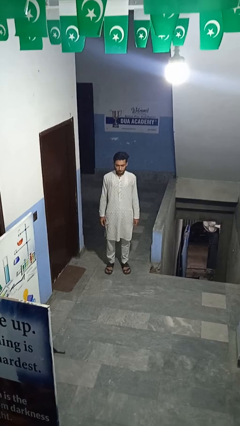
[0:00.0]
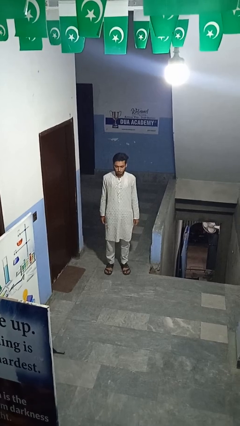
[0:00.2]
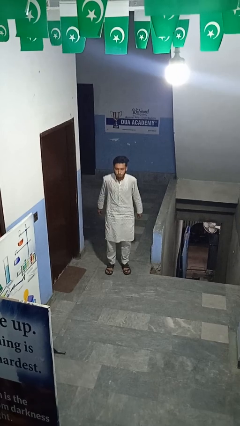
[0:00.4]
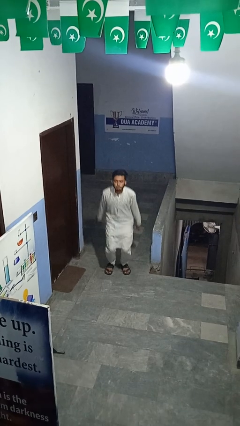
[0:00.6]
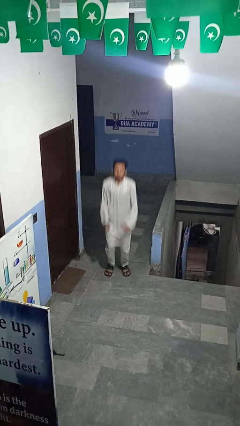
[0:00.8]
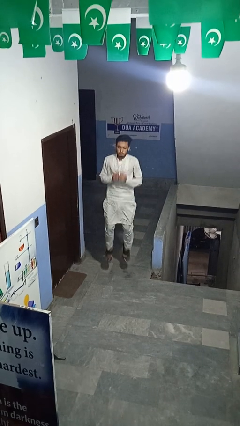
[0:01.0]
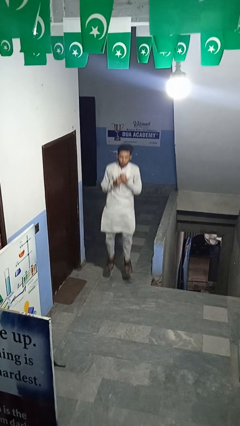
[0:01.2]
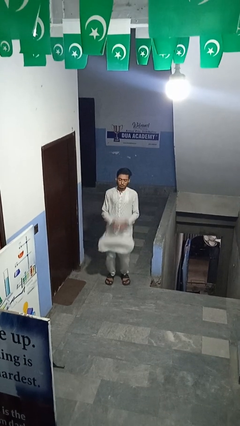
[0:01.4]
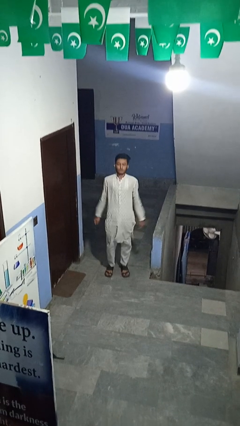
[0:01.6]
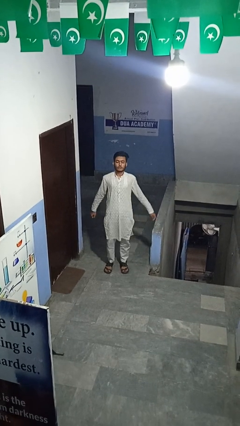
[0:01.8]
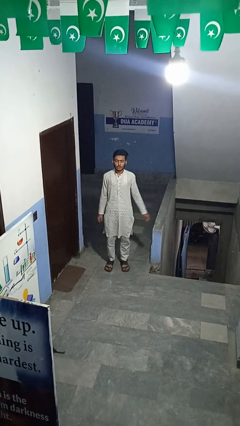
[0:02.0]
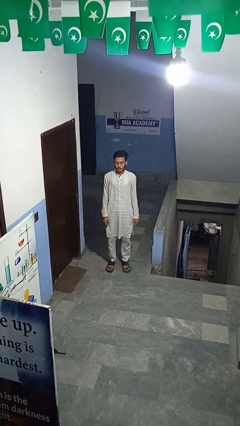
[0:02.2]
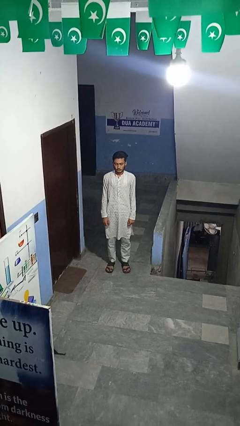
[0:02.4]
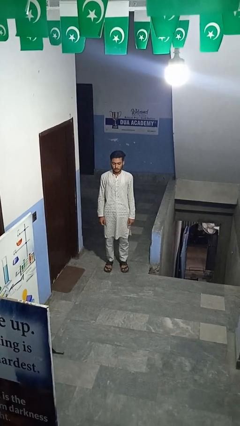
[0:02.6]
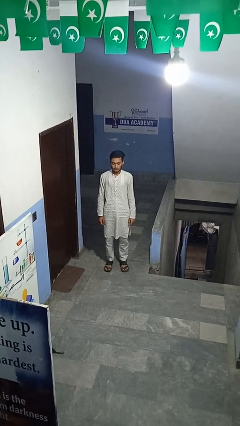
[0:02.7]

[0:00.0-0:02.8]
person jumps

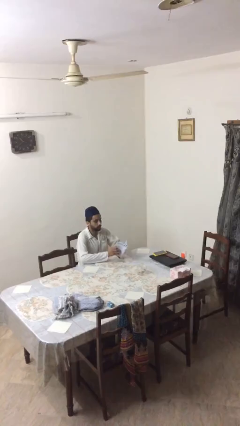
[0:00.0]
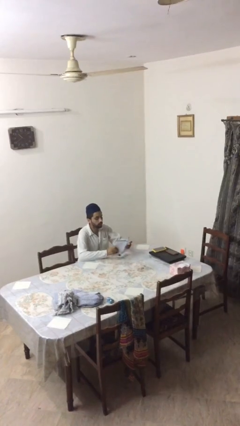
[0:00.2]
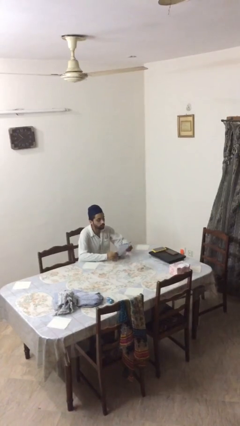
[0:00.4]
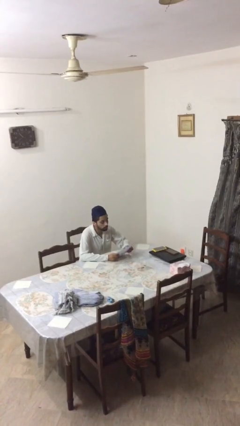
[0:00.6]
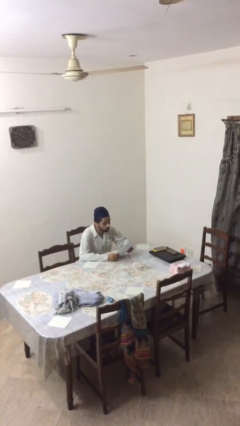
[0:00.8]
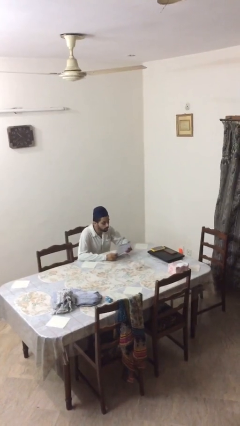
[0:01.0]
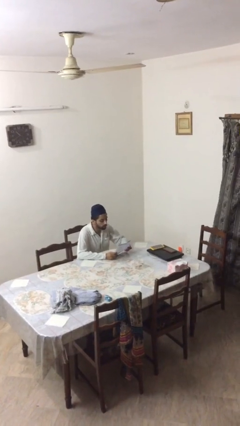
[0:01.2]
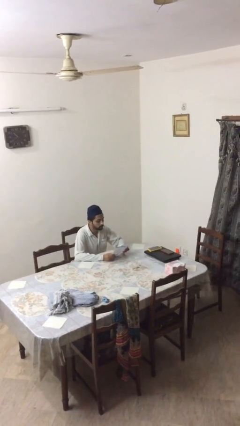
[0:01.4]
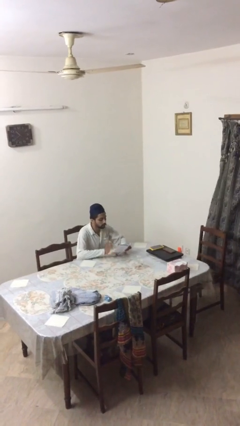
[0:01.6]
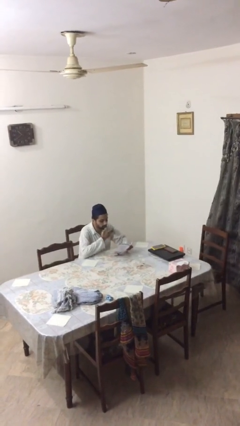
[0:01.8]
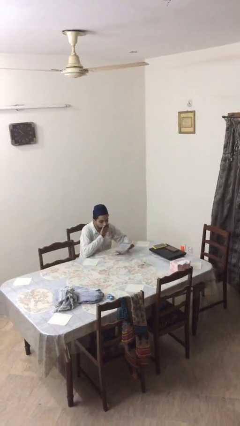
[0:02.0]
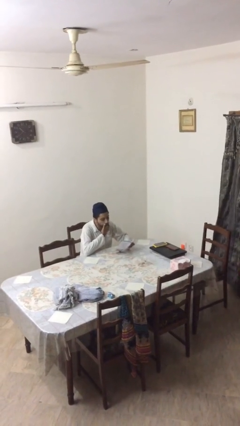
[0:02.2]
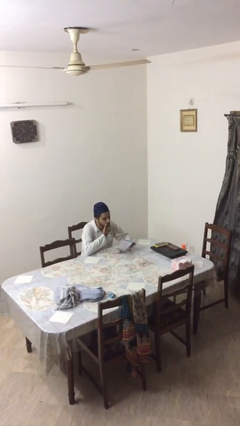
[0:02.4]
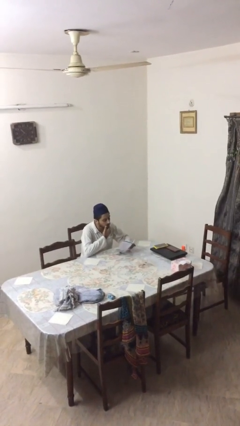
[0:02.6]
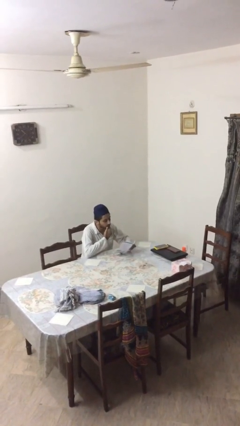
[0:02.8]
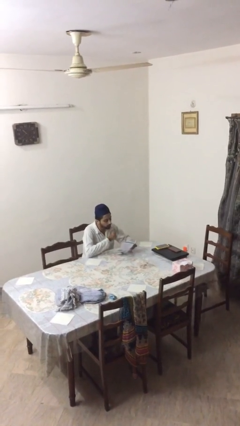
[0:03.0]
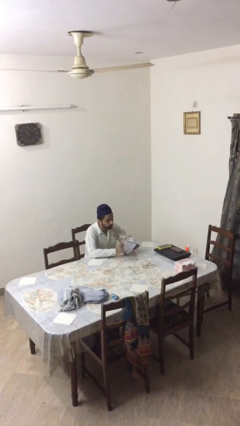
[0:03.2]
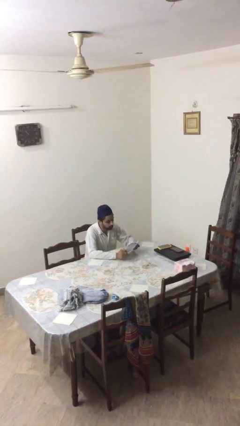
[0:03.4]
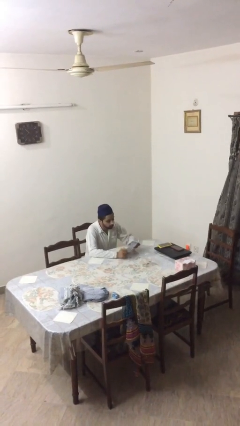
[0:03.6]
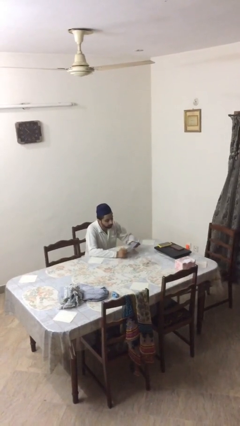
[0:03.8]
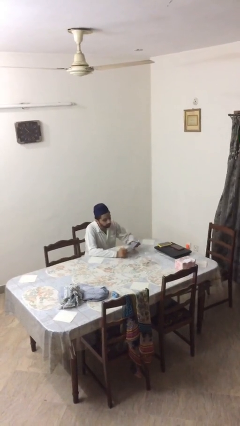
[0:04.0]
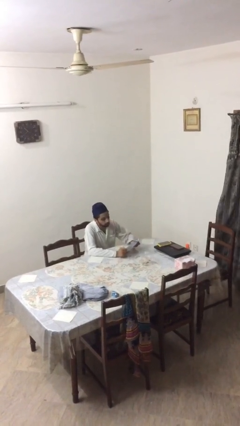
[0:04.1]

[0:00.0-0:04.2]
person reads document

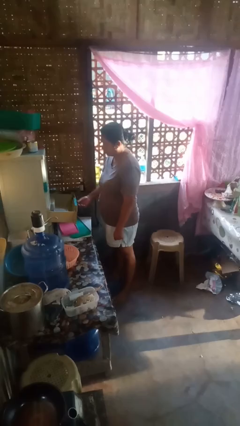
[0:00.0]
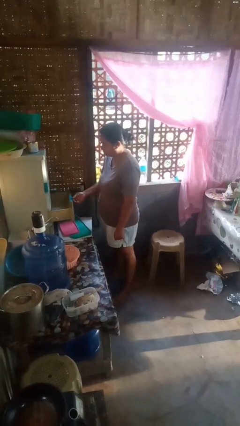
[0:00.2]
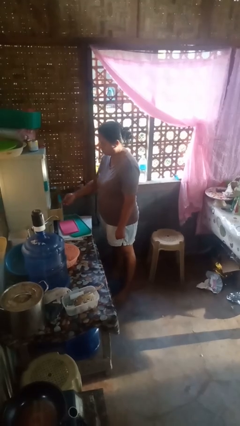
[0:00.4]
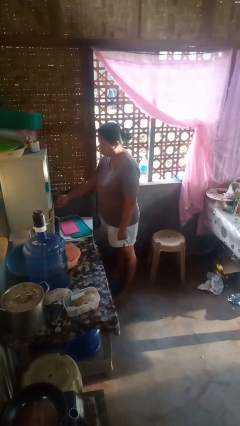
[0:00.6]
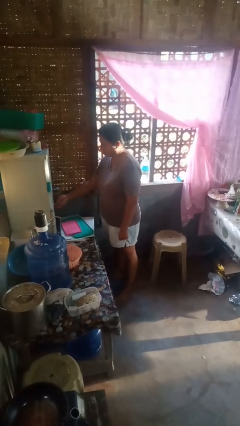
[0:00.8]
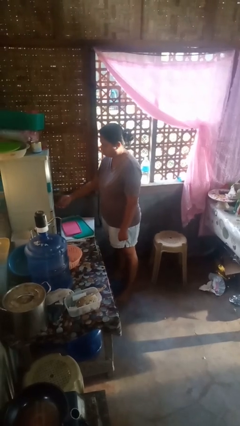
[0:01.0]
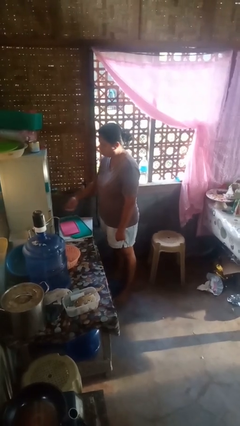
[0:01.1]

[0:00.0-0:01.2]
person closes kitchen drawer

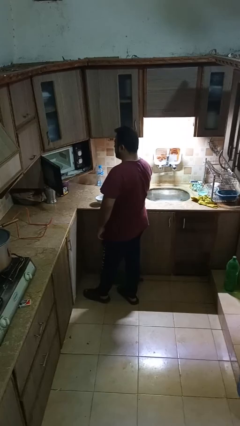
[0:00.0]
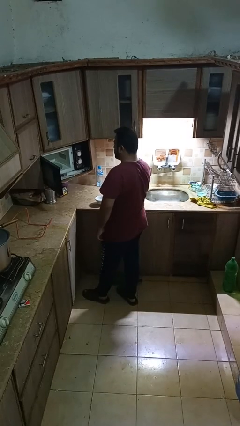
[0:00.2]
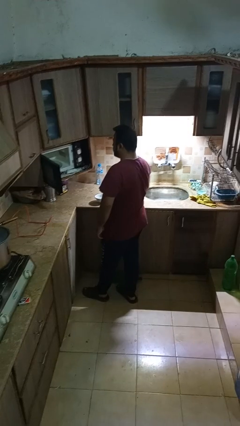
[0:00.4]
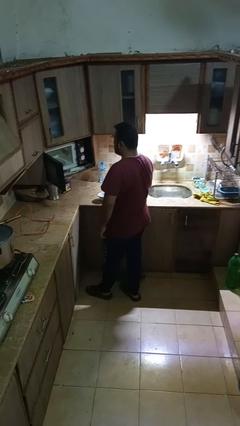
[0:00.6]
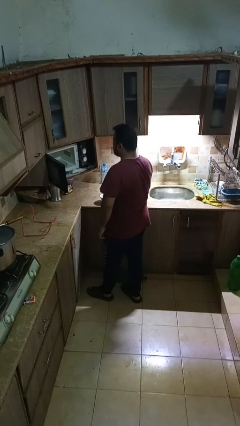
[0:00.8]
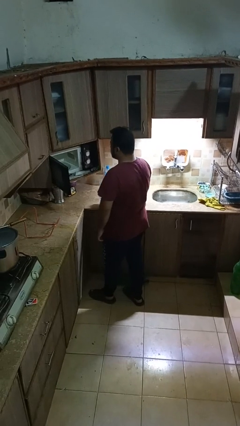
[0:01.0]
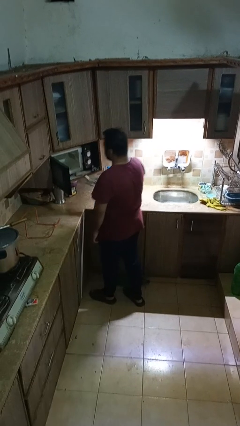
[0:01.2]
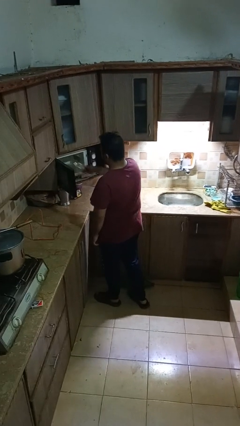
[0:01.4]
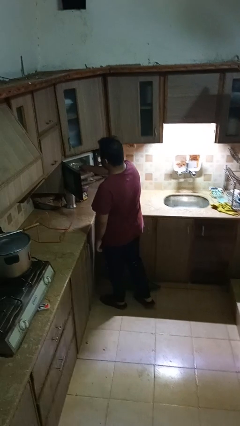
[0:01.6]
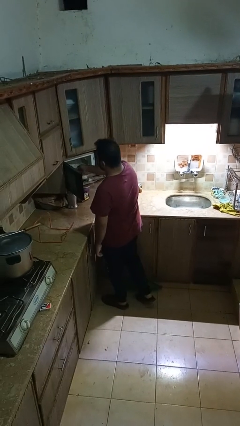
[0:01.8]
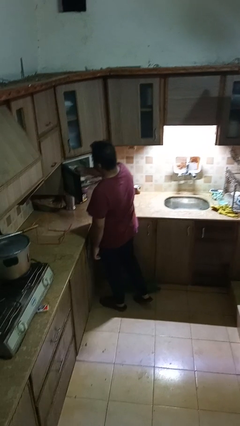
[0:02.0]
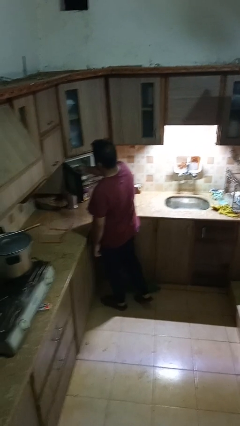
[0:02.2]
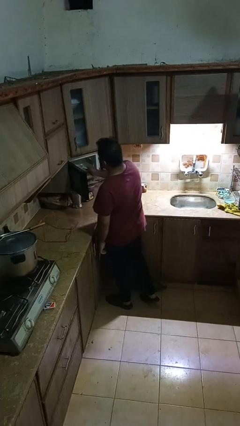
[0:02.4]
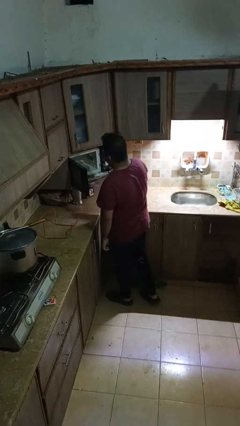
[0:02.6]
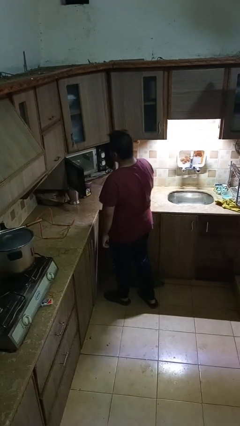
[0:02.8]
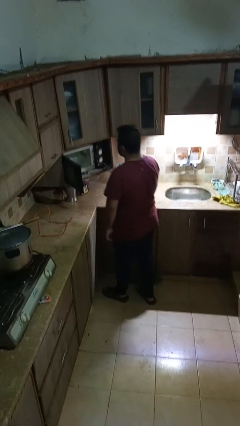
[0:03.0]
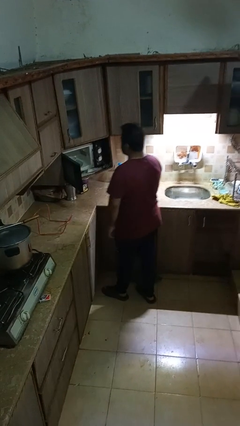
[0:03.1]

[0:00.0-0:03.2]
person puts object into microwave

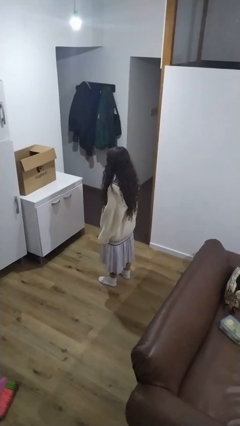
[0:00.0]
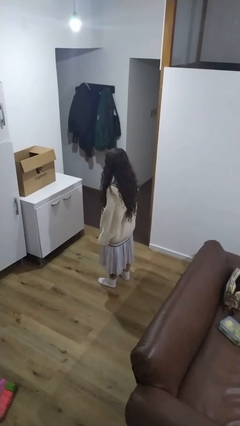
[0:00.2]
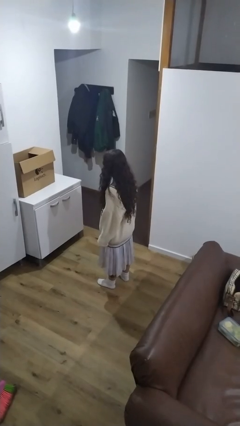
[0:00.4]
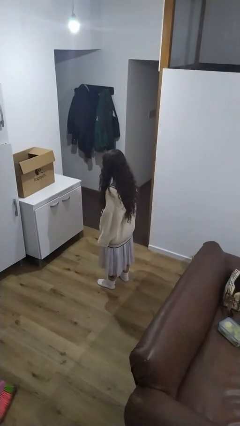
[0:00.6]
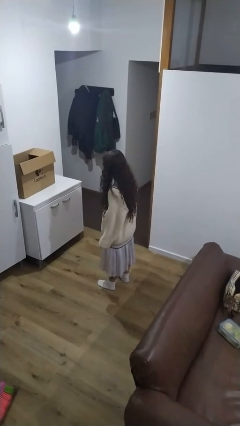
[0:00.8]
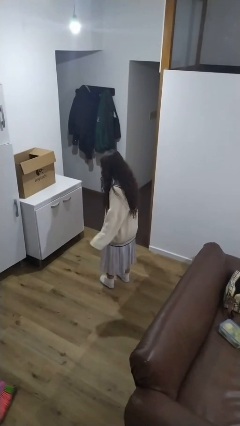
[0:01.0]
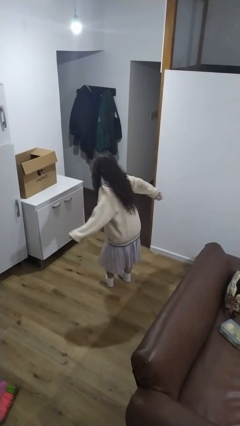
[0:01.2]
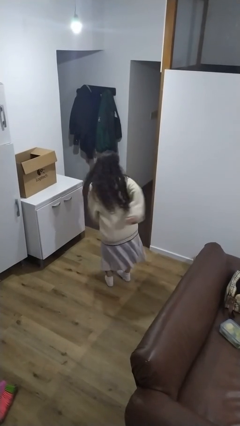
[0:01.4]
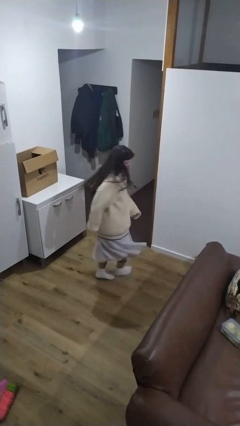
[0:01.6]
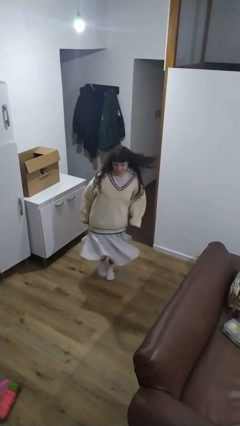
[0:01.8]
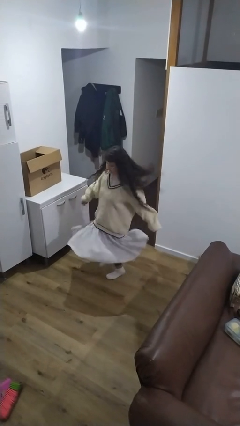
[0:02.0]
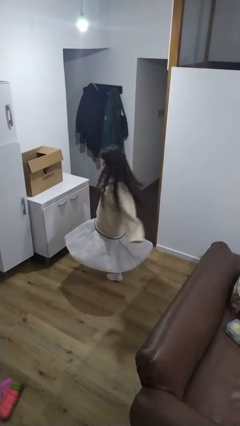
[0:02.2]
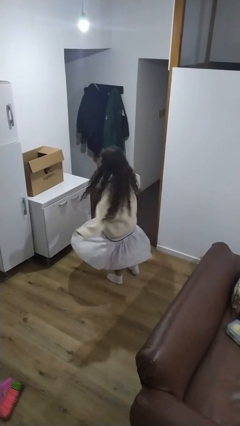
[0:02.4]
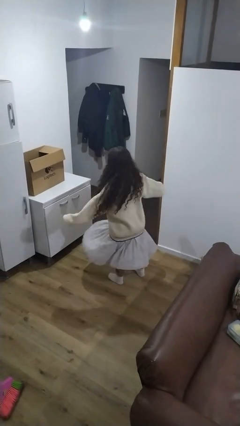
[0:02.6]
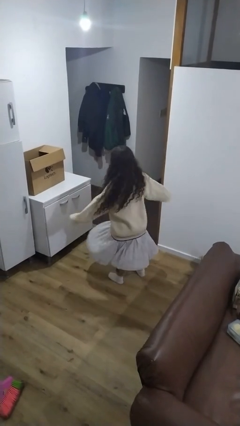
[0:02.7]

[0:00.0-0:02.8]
person twirls

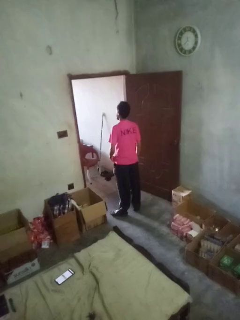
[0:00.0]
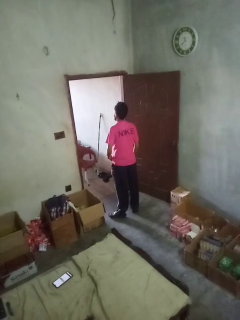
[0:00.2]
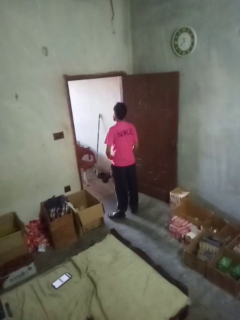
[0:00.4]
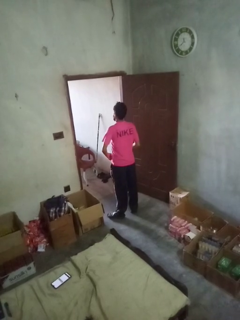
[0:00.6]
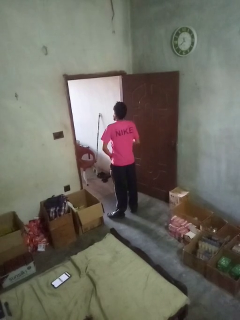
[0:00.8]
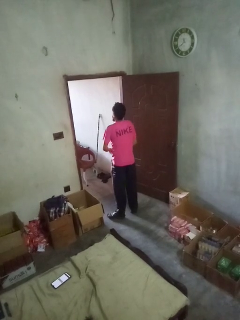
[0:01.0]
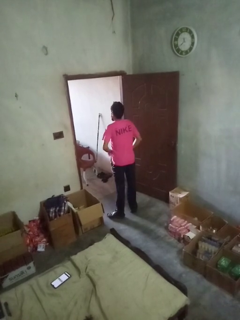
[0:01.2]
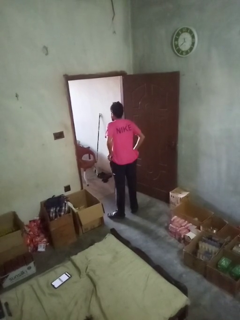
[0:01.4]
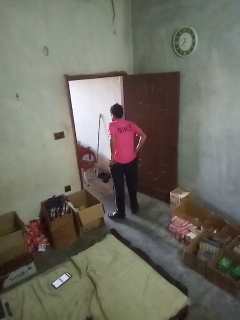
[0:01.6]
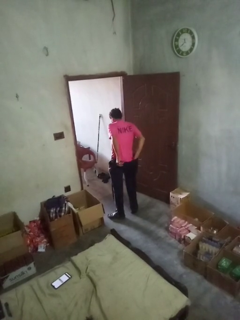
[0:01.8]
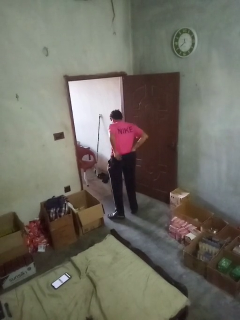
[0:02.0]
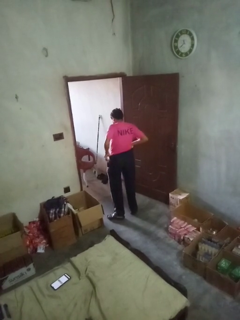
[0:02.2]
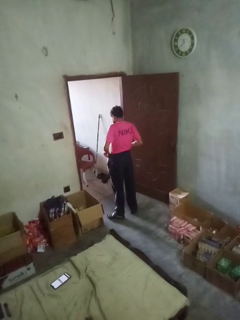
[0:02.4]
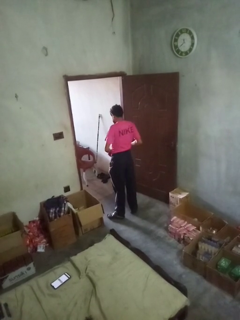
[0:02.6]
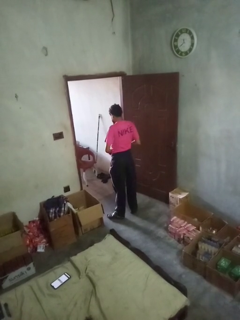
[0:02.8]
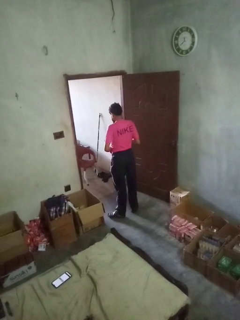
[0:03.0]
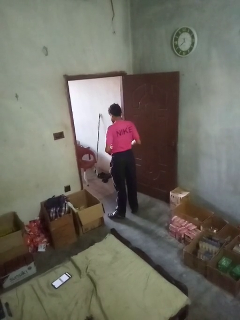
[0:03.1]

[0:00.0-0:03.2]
person tucks in shirt

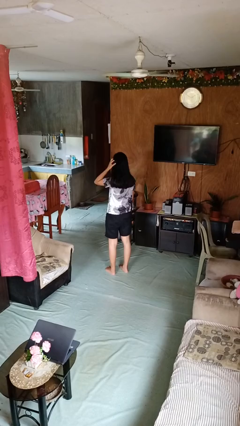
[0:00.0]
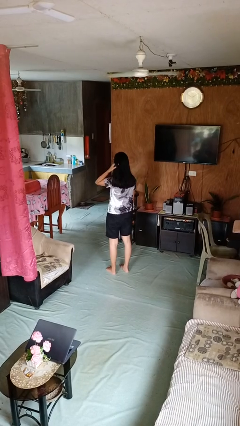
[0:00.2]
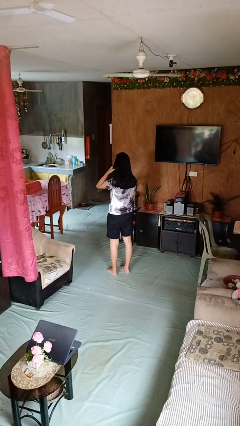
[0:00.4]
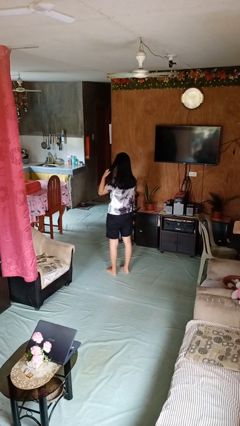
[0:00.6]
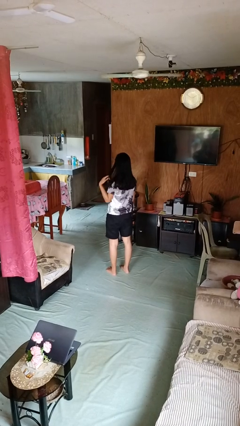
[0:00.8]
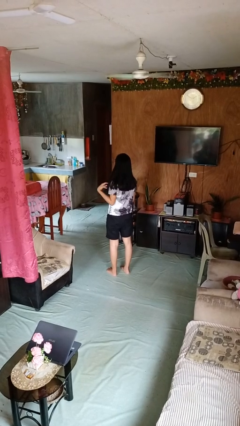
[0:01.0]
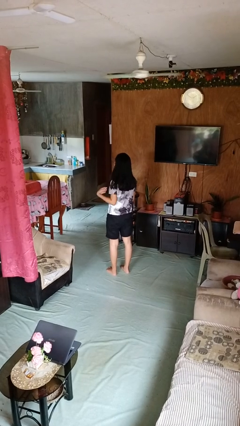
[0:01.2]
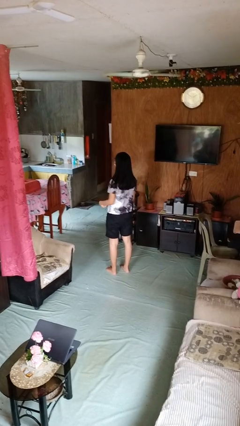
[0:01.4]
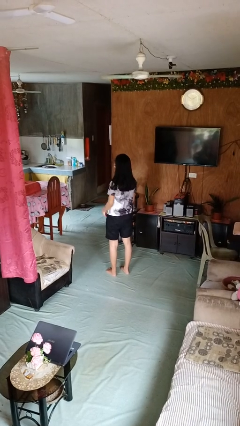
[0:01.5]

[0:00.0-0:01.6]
person strokes hair
